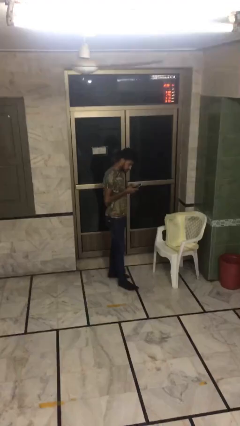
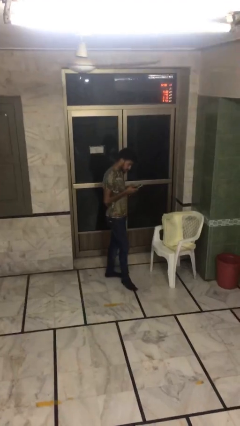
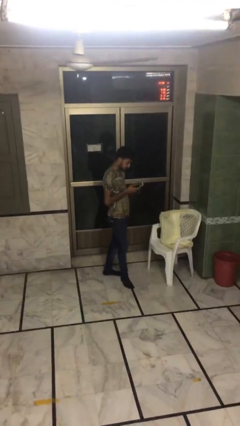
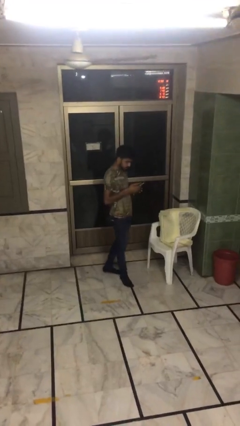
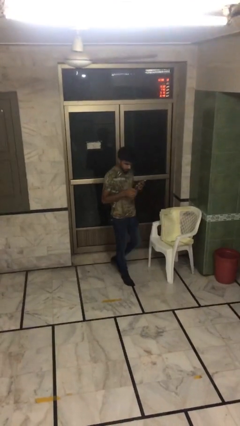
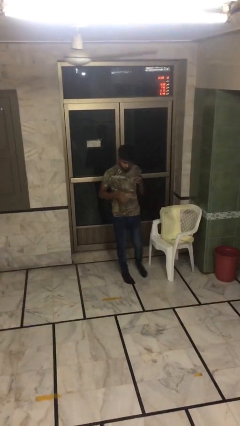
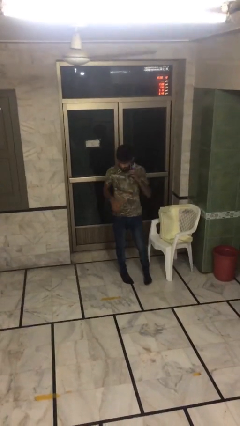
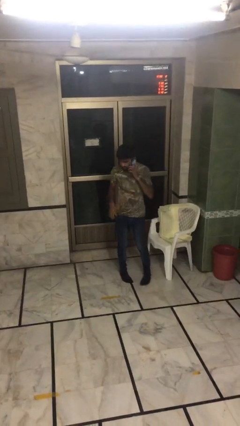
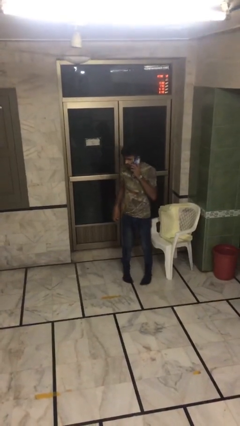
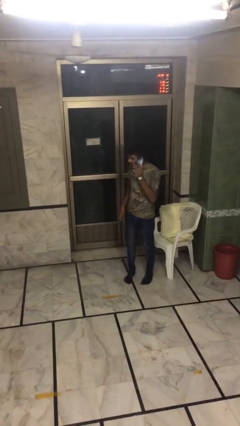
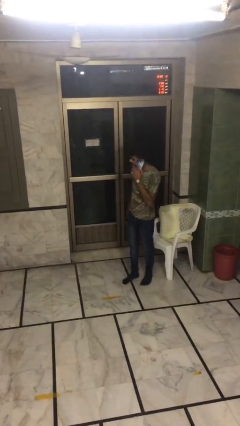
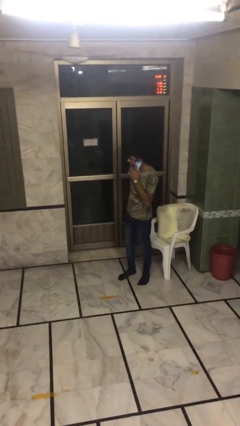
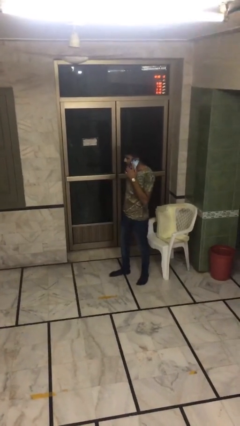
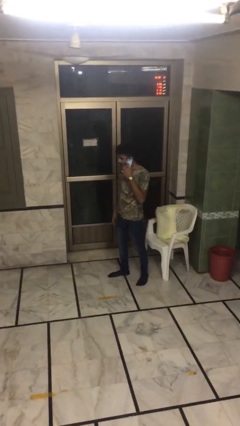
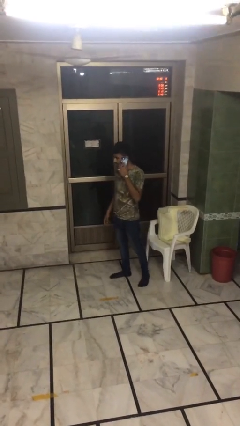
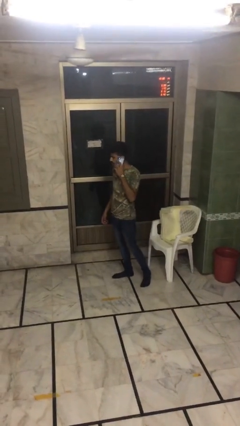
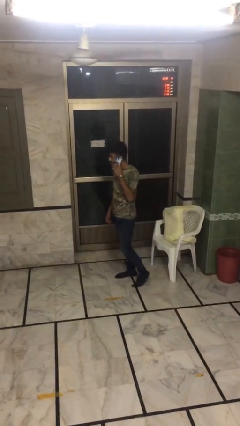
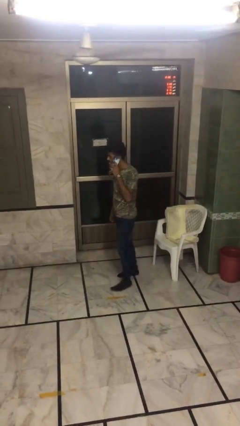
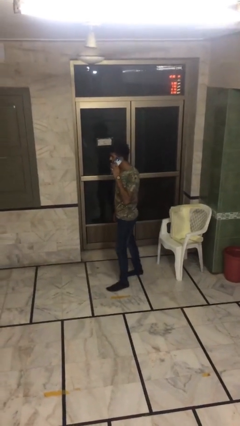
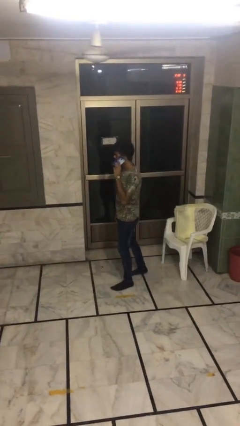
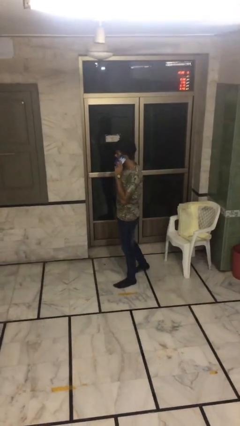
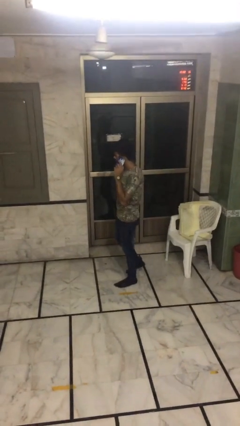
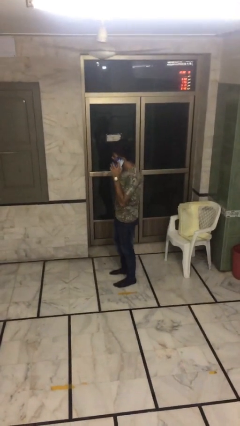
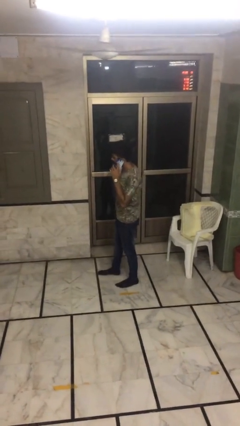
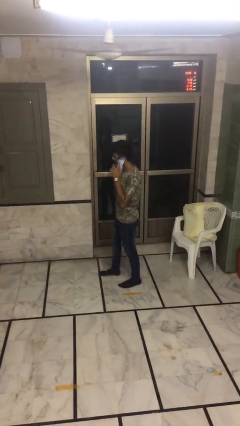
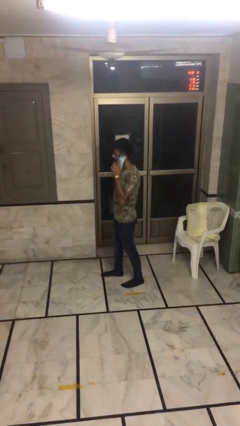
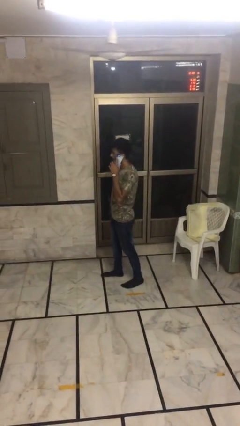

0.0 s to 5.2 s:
person talks on phone

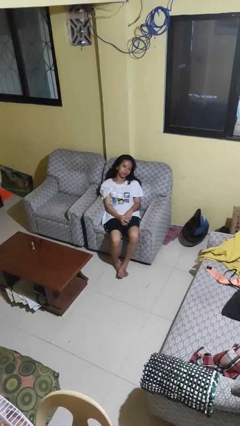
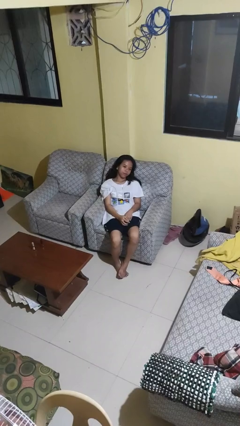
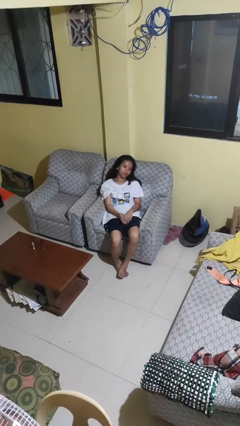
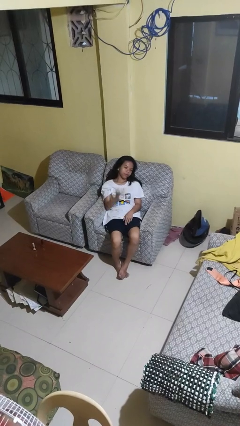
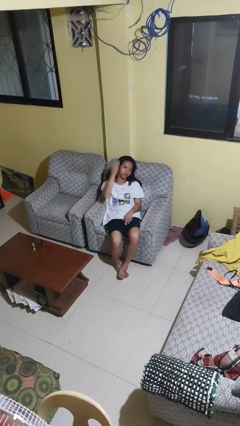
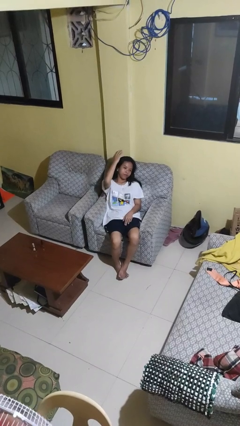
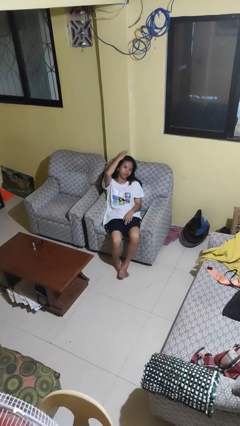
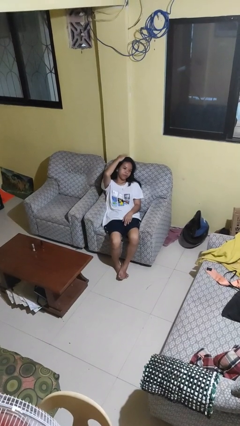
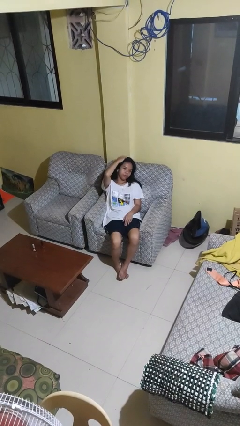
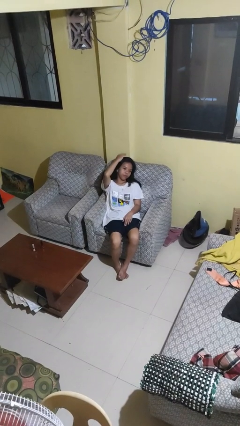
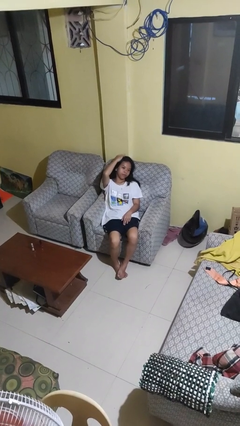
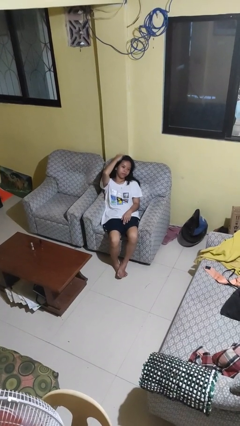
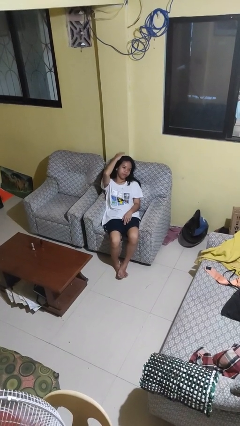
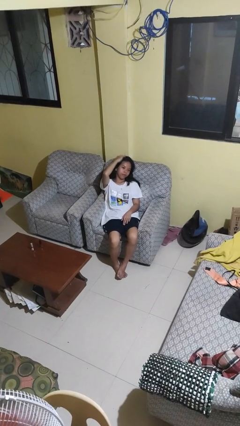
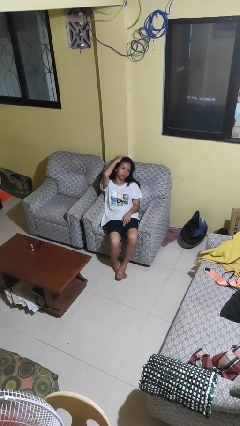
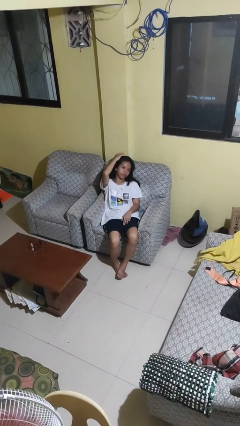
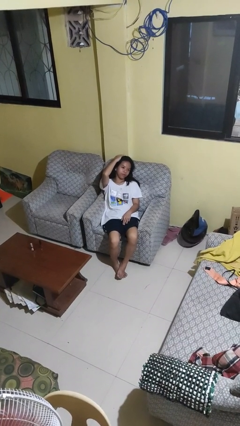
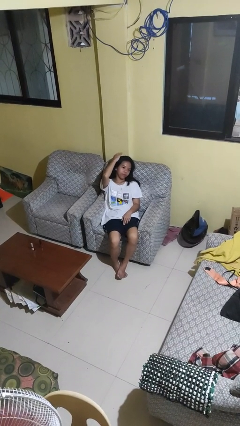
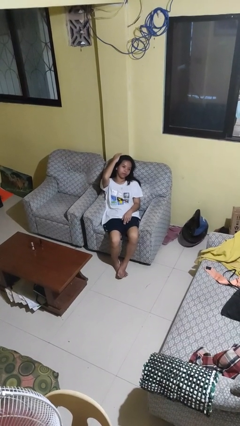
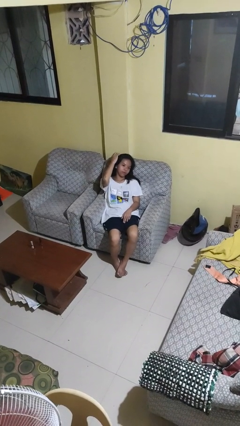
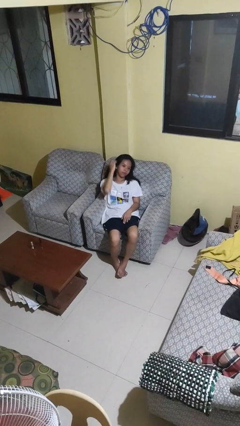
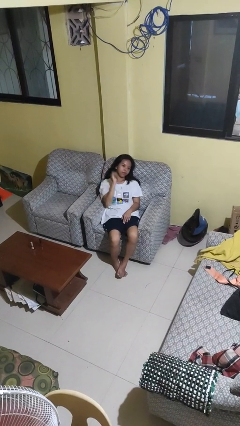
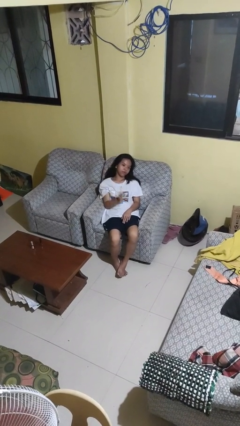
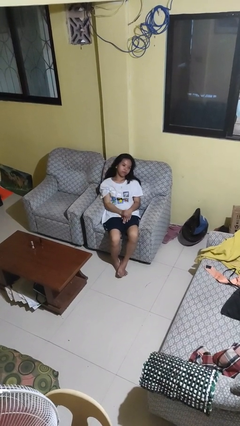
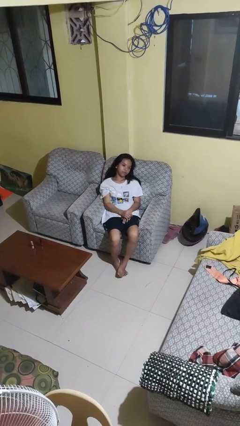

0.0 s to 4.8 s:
person pats head

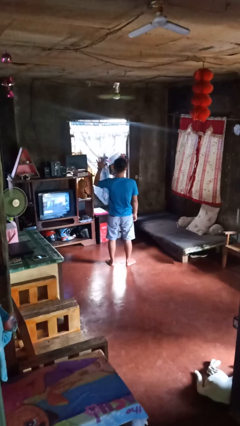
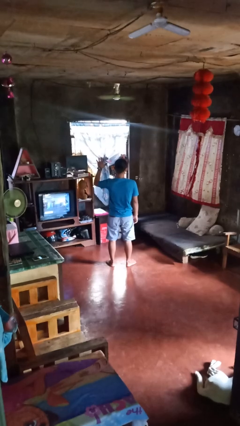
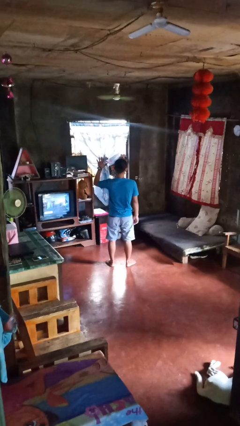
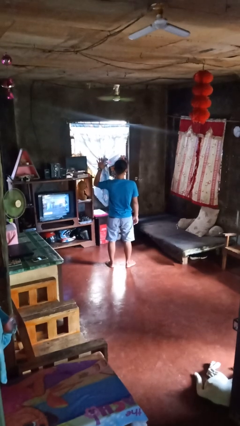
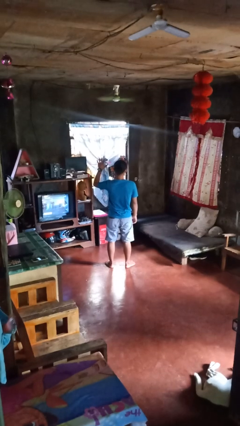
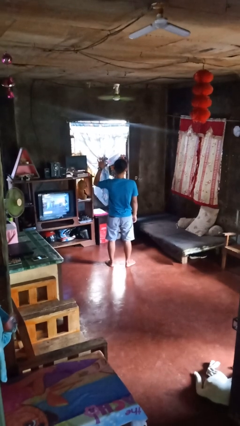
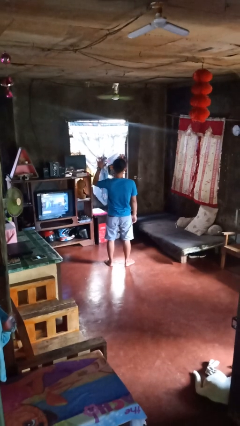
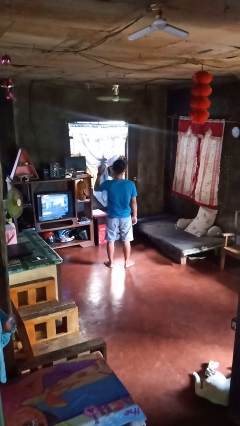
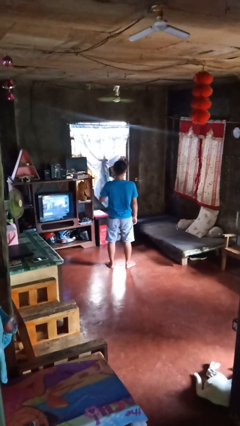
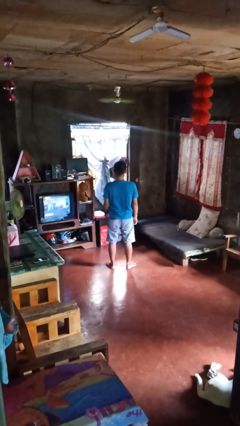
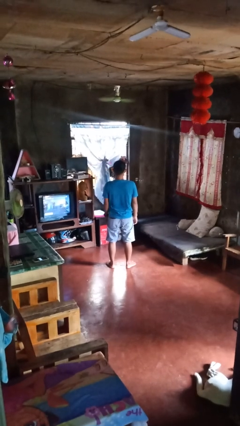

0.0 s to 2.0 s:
person gestures number five

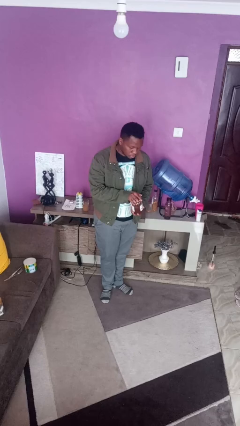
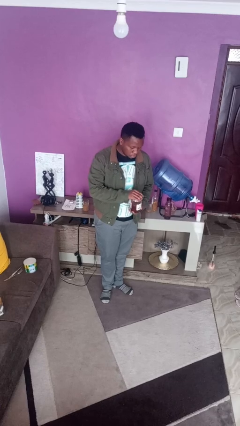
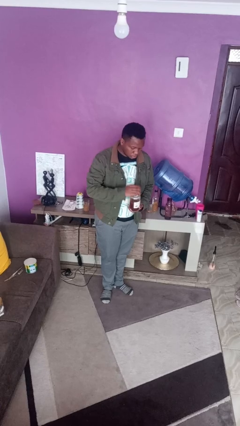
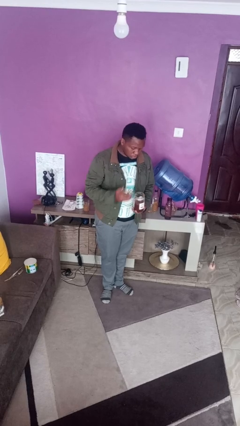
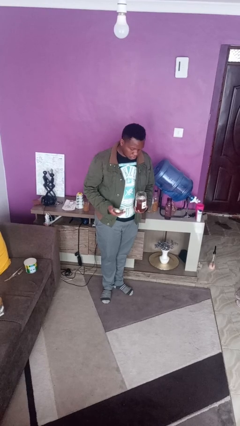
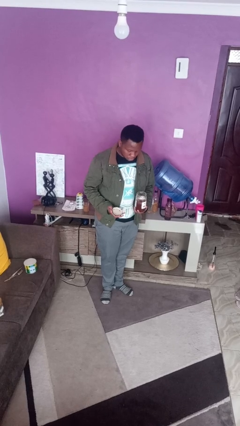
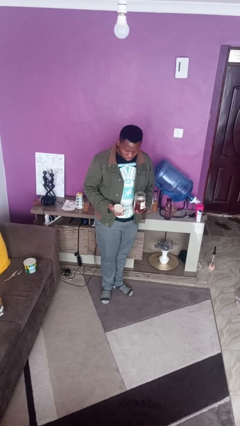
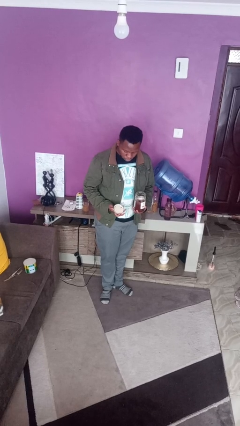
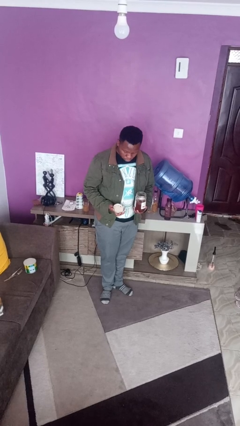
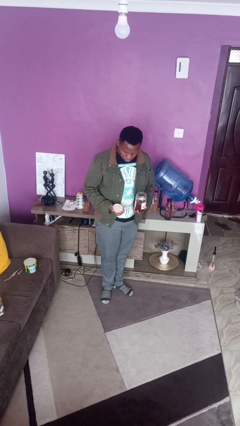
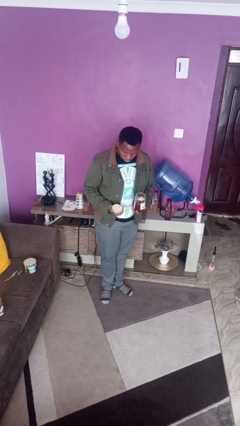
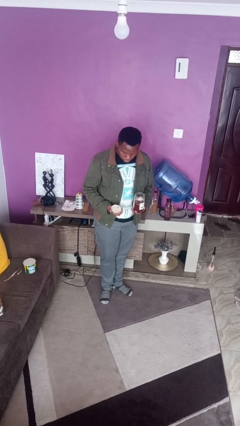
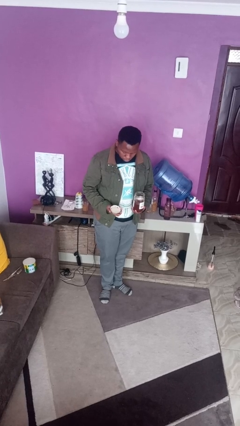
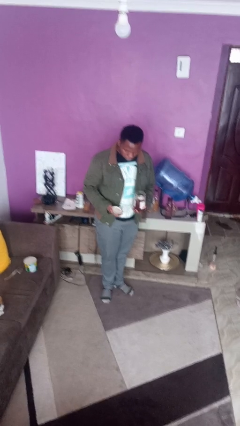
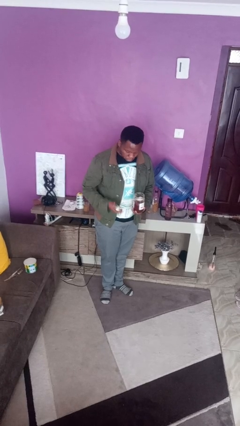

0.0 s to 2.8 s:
person opens jar

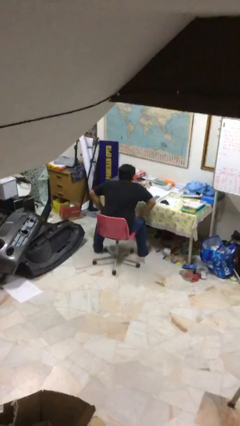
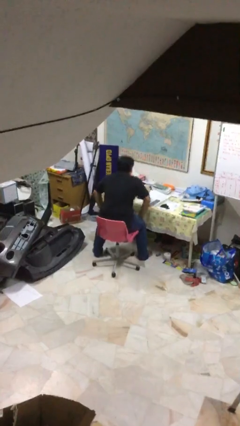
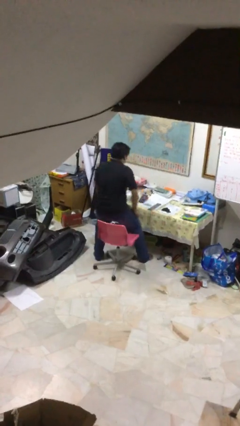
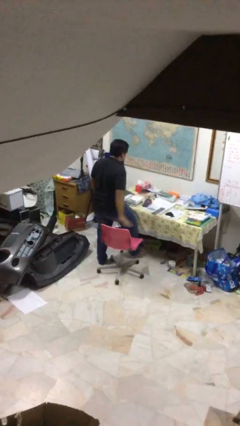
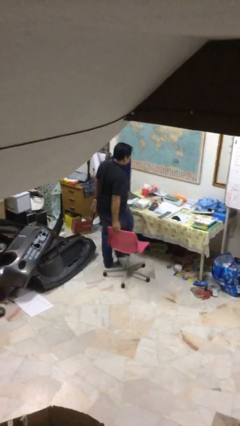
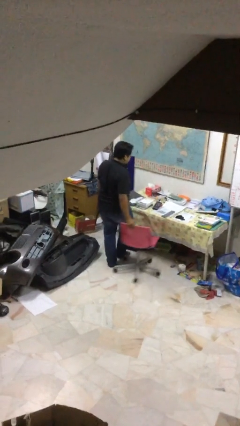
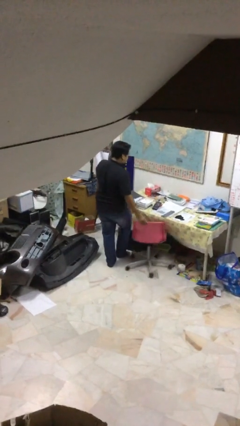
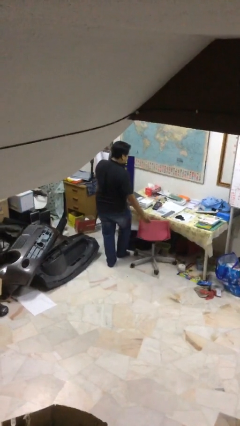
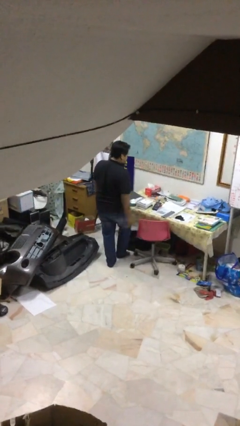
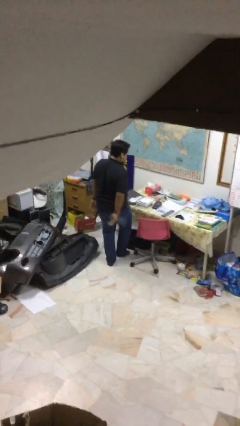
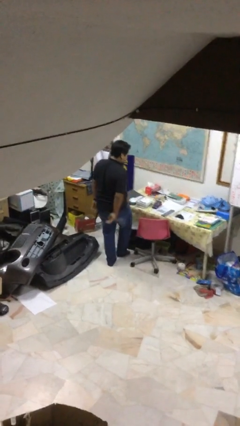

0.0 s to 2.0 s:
person stands up

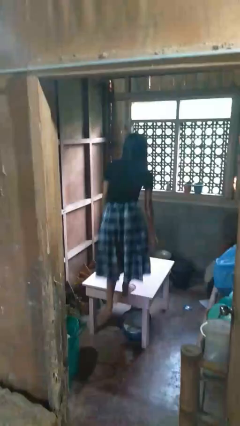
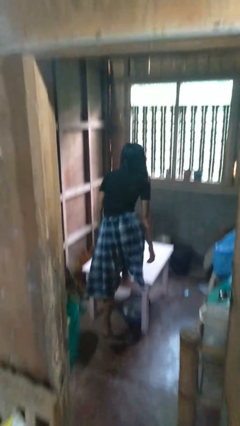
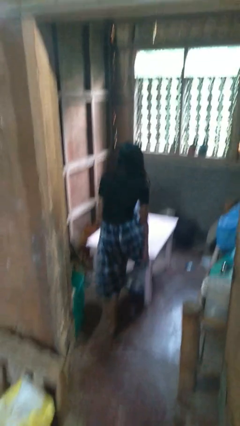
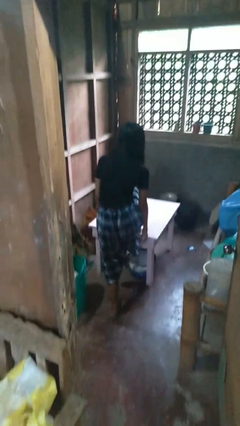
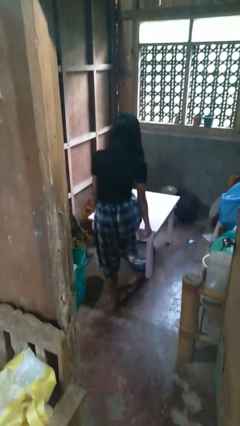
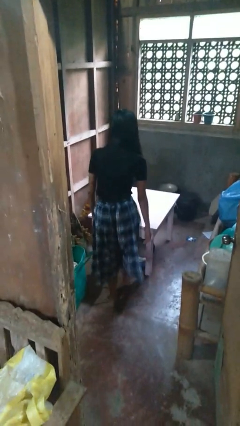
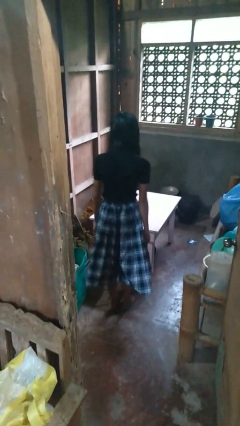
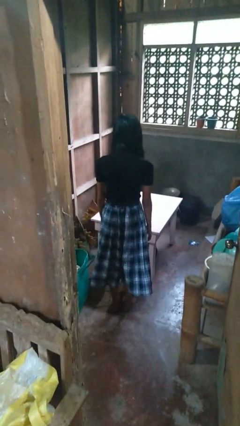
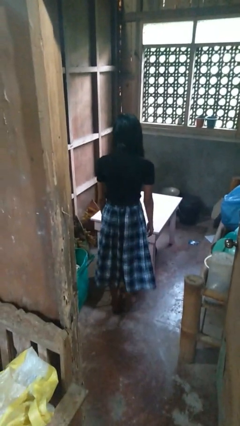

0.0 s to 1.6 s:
person climbs off table
